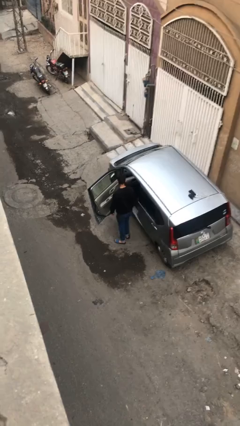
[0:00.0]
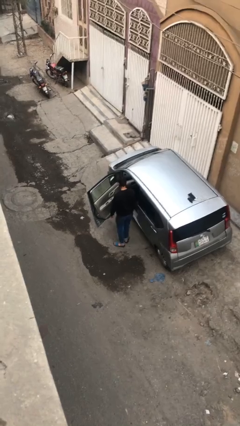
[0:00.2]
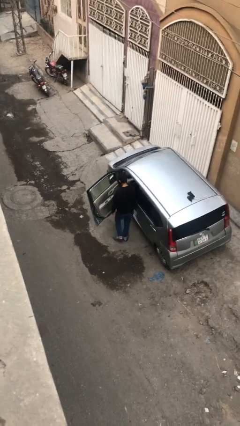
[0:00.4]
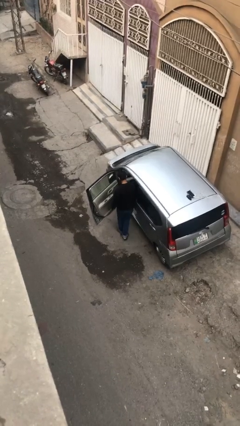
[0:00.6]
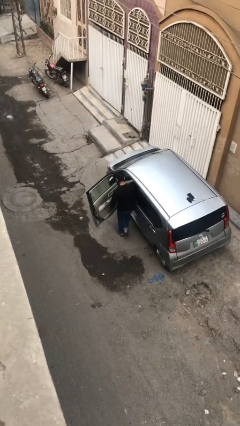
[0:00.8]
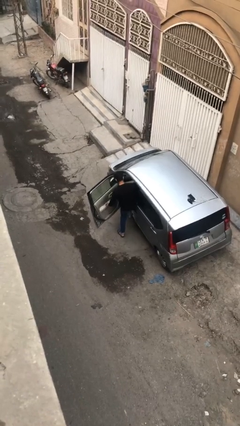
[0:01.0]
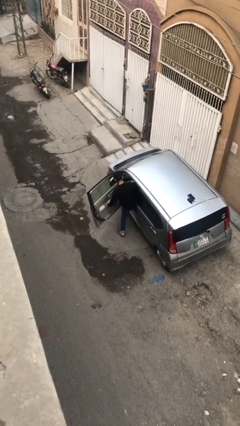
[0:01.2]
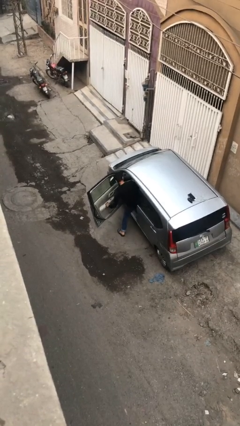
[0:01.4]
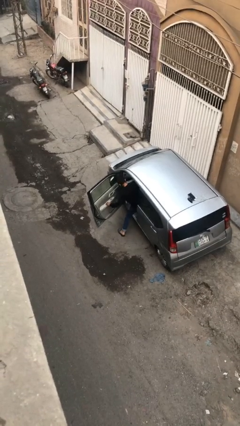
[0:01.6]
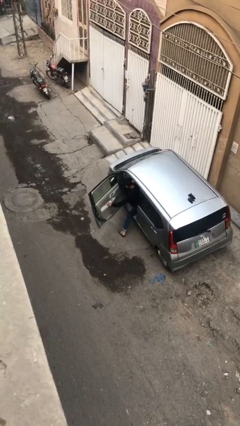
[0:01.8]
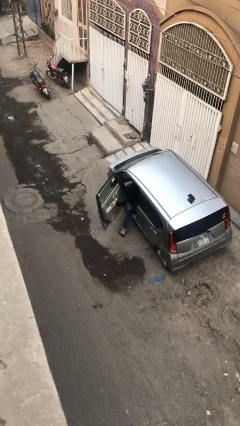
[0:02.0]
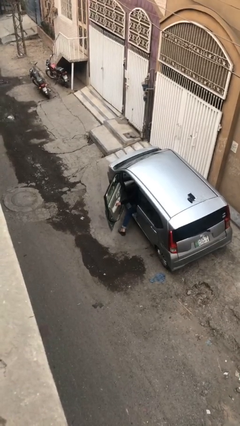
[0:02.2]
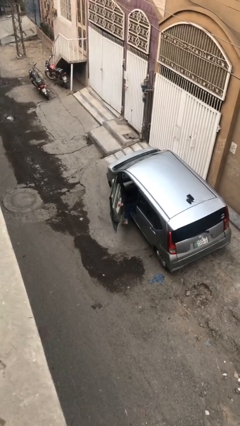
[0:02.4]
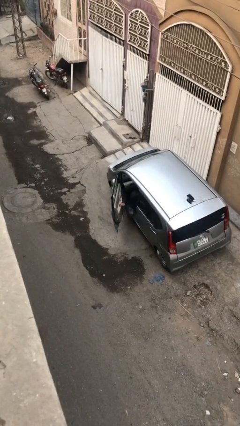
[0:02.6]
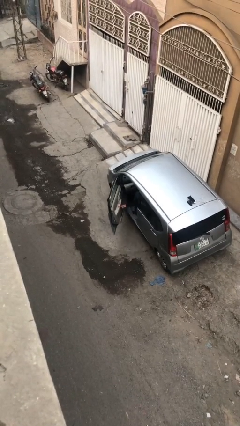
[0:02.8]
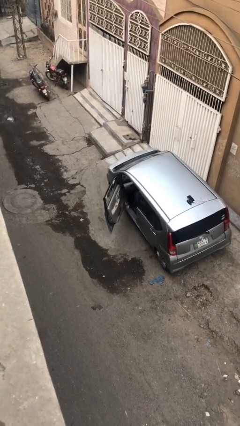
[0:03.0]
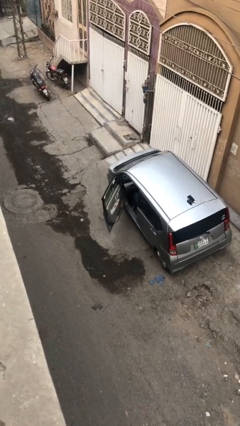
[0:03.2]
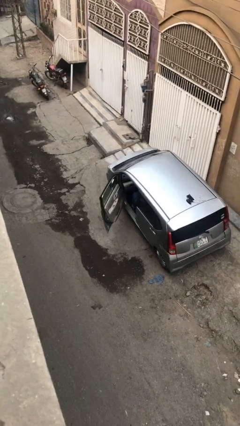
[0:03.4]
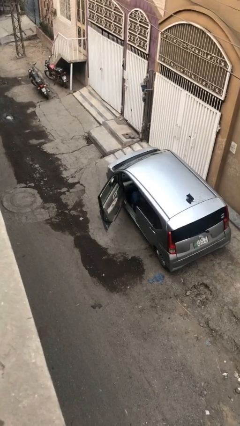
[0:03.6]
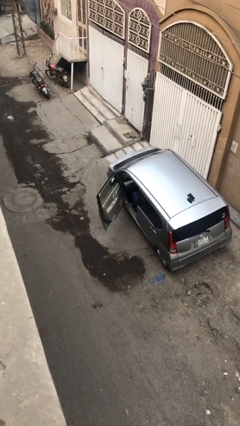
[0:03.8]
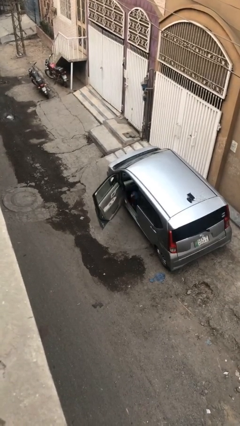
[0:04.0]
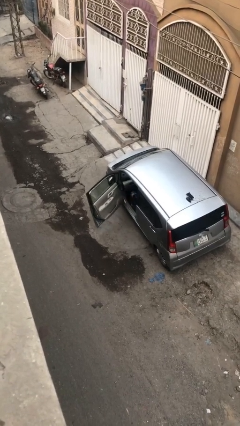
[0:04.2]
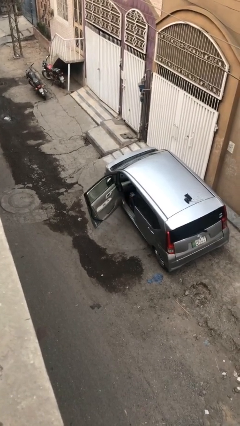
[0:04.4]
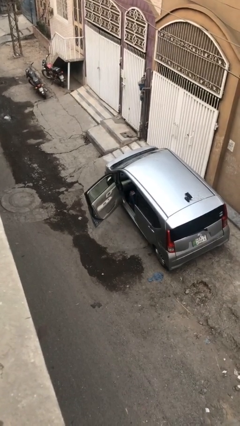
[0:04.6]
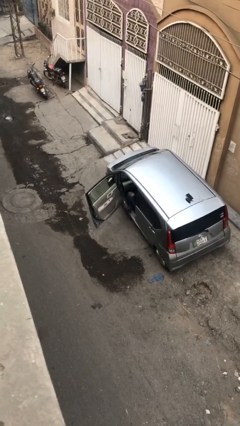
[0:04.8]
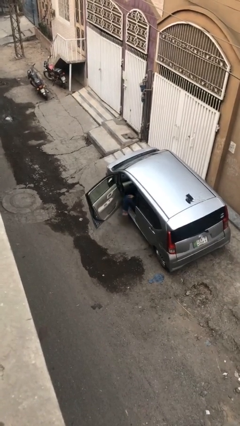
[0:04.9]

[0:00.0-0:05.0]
person enters car

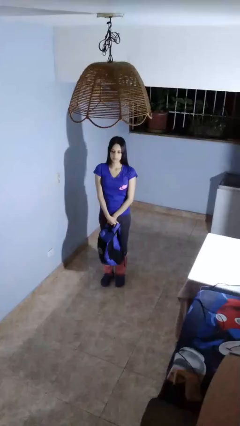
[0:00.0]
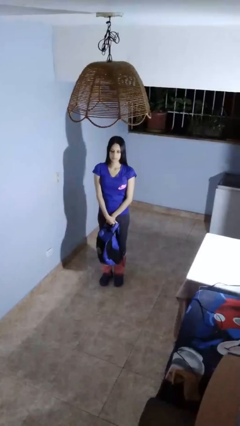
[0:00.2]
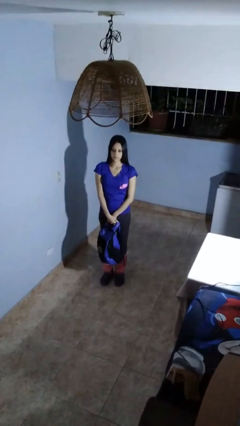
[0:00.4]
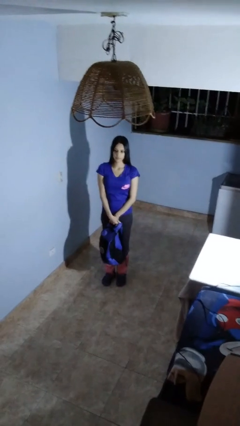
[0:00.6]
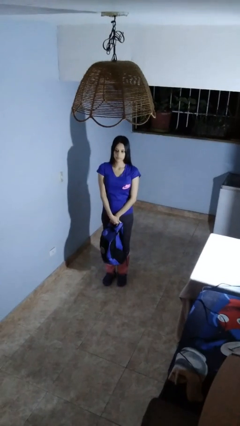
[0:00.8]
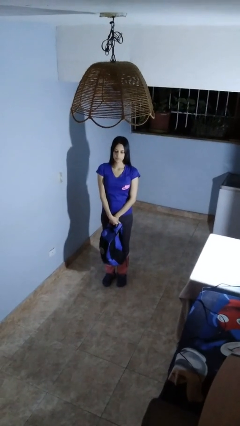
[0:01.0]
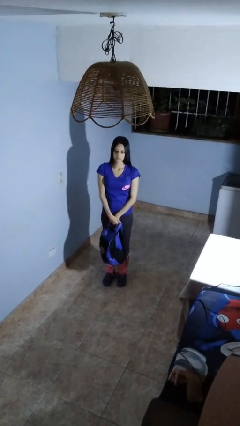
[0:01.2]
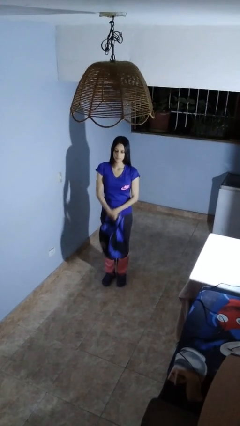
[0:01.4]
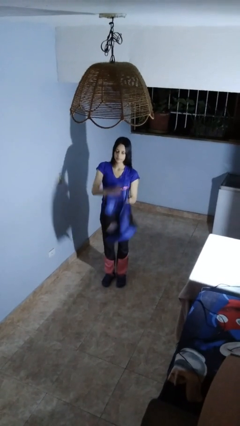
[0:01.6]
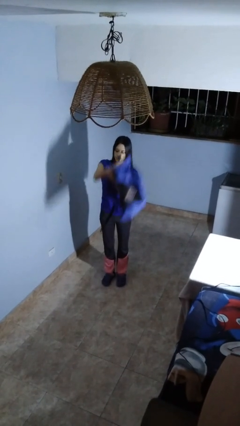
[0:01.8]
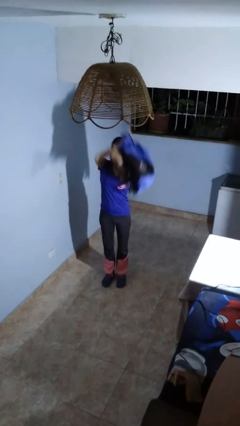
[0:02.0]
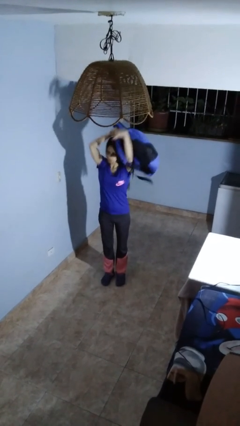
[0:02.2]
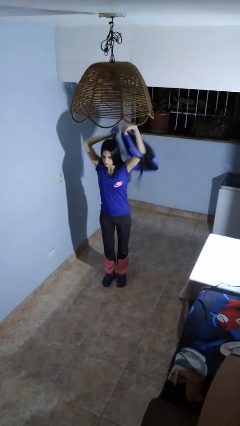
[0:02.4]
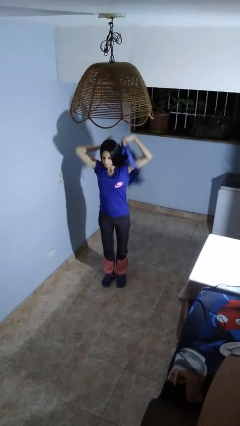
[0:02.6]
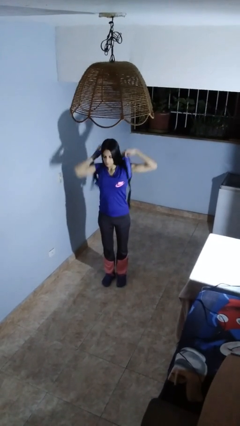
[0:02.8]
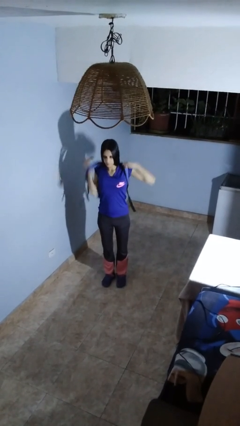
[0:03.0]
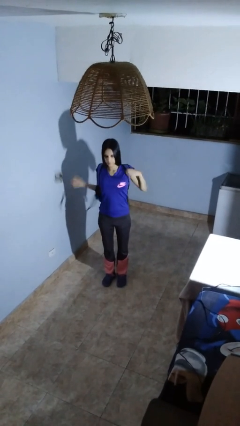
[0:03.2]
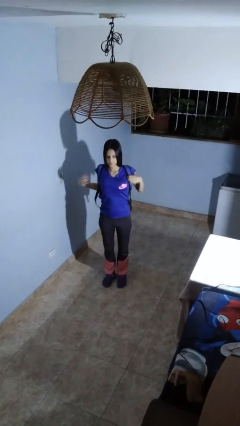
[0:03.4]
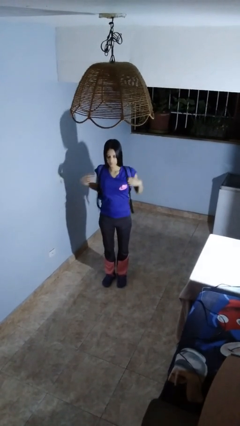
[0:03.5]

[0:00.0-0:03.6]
person puts on backpack

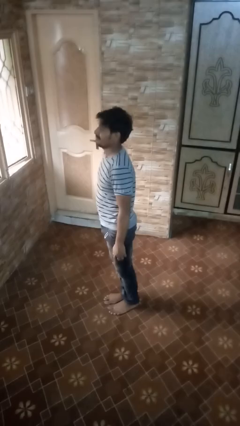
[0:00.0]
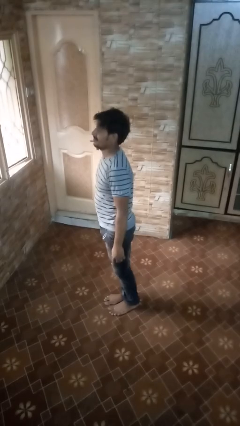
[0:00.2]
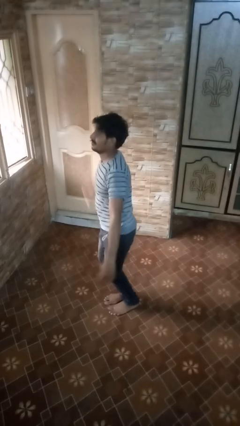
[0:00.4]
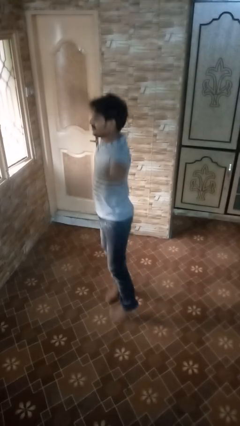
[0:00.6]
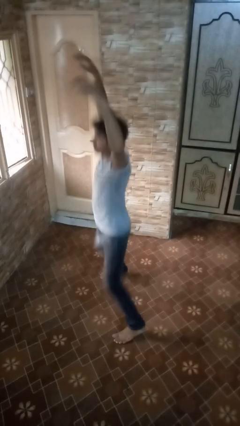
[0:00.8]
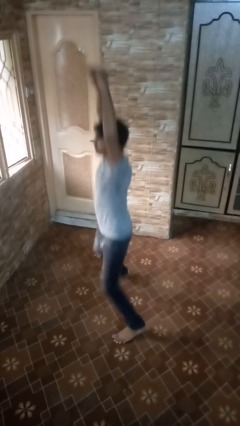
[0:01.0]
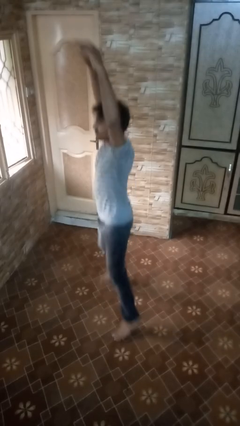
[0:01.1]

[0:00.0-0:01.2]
person exercises with jumping jacks

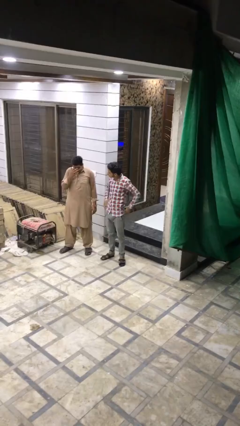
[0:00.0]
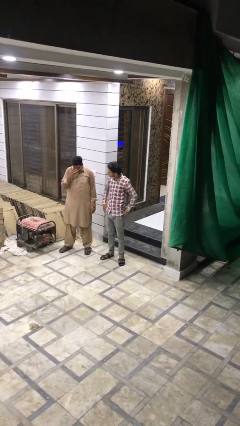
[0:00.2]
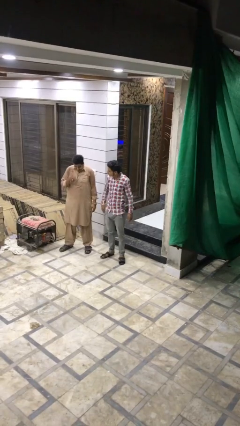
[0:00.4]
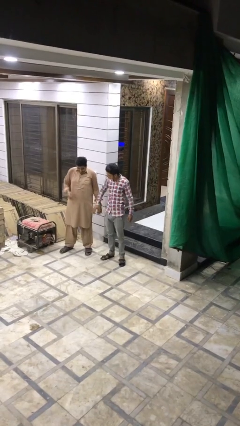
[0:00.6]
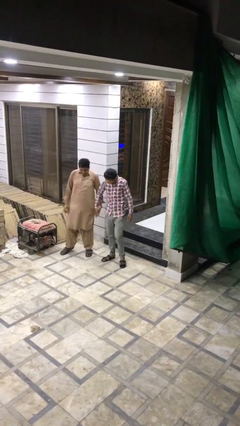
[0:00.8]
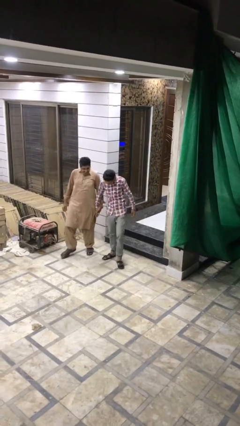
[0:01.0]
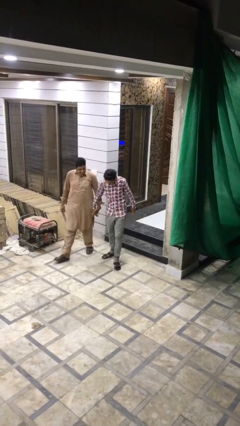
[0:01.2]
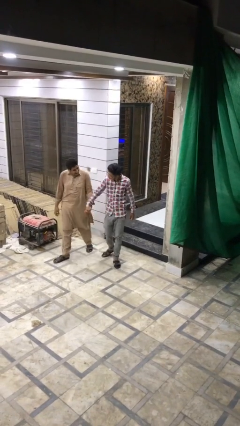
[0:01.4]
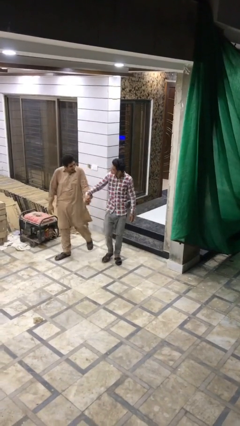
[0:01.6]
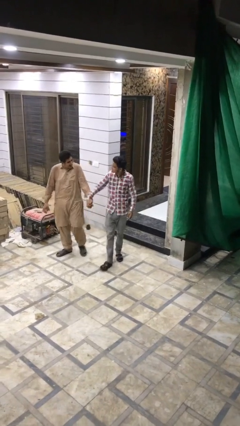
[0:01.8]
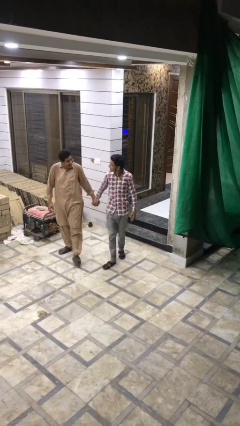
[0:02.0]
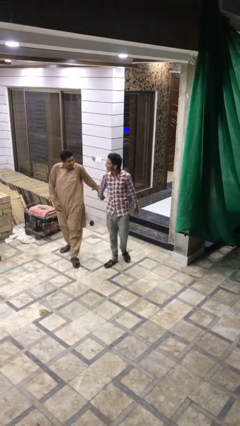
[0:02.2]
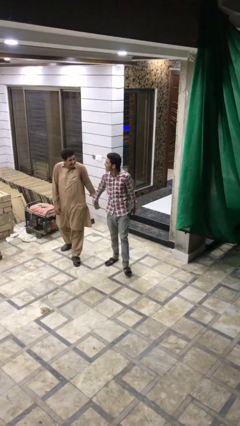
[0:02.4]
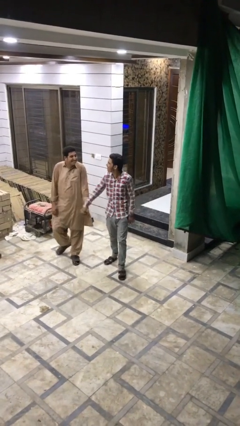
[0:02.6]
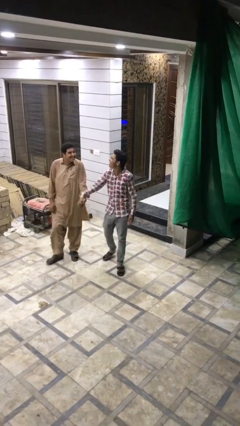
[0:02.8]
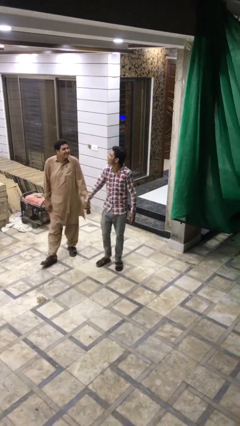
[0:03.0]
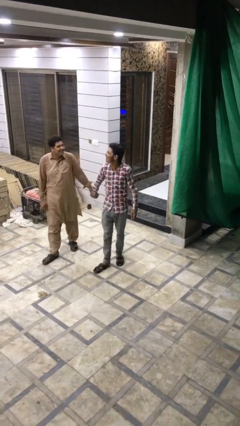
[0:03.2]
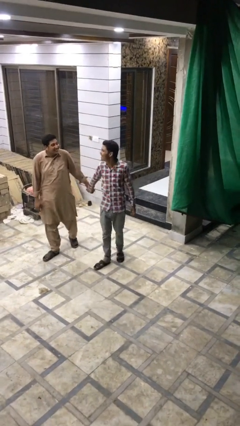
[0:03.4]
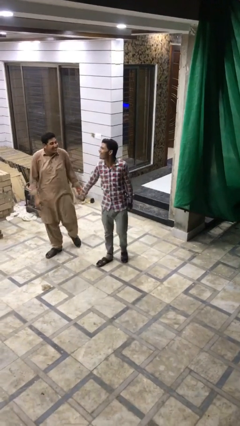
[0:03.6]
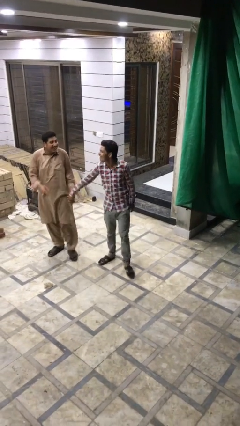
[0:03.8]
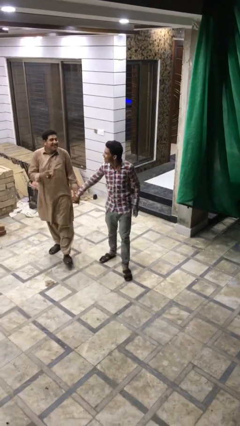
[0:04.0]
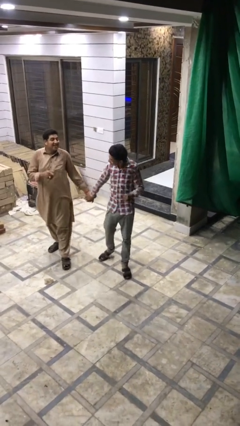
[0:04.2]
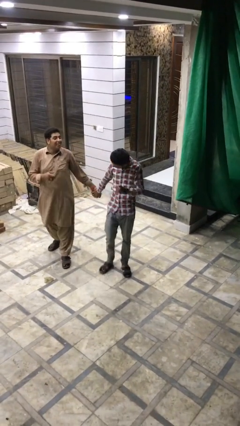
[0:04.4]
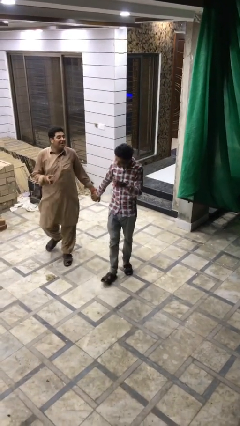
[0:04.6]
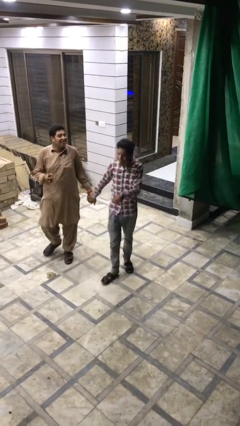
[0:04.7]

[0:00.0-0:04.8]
person holds hand

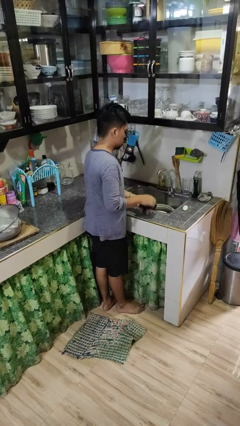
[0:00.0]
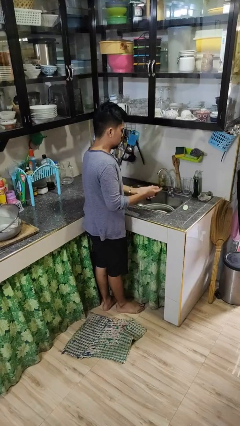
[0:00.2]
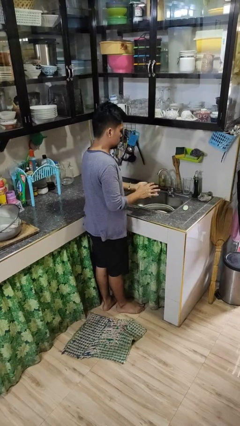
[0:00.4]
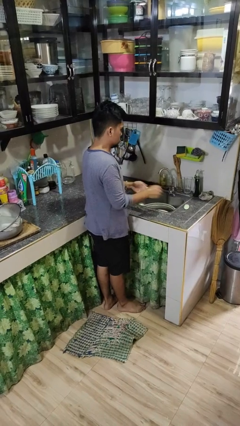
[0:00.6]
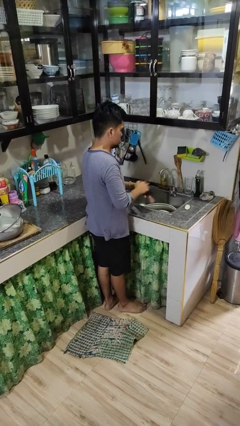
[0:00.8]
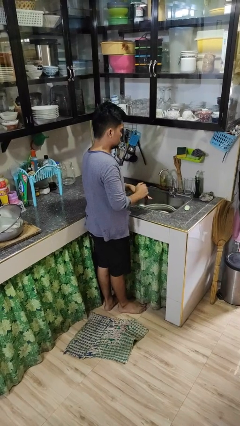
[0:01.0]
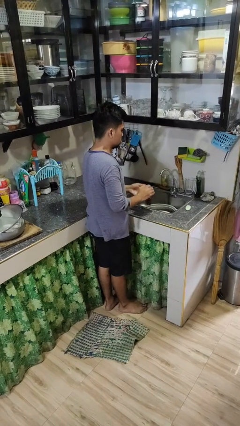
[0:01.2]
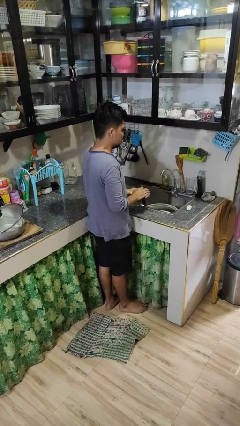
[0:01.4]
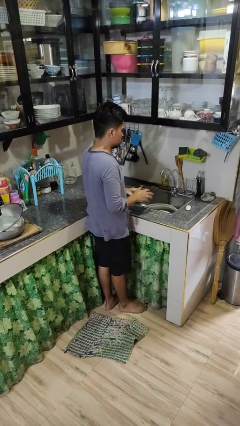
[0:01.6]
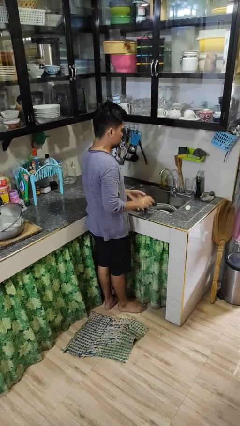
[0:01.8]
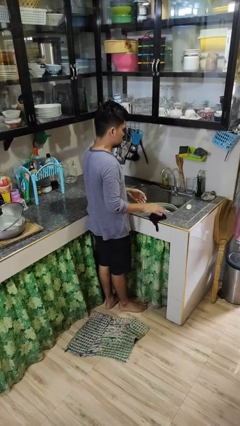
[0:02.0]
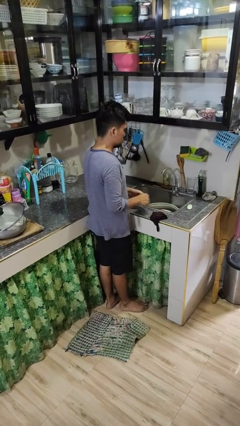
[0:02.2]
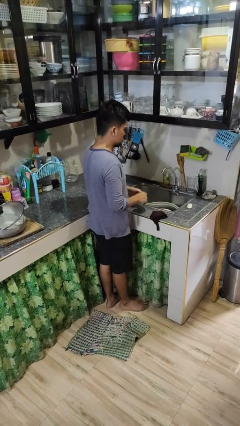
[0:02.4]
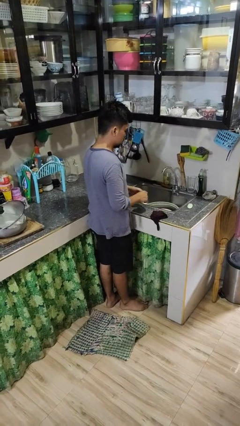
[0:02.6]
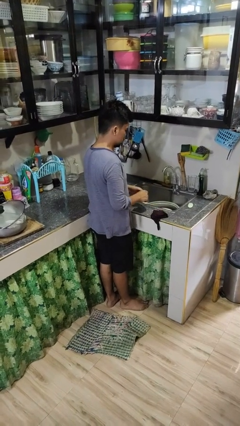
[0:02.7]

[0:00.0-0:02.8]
person dries hands with towel

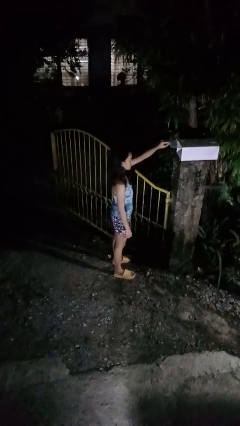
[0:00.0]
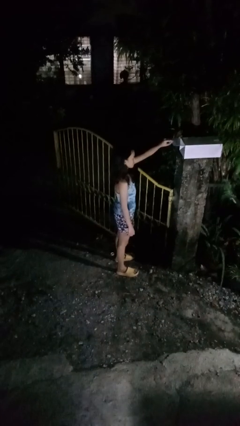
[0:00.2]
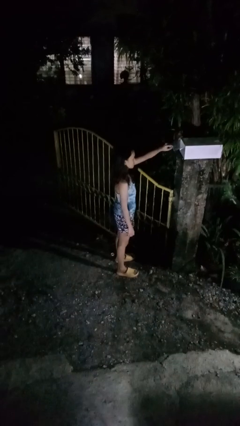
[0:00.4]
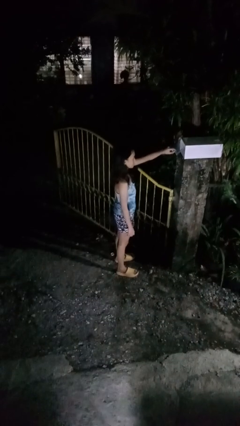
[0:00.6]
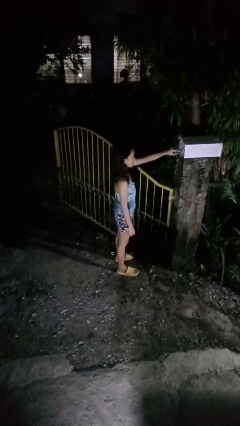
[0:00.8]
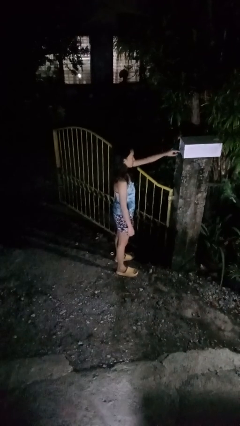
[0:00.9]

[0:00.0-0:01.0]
person closes mailbox
